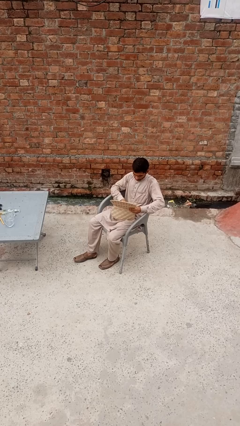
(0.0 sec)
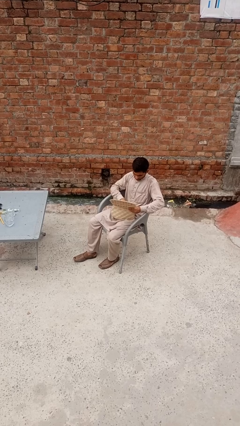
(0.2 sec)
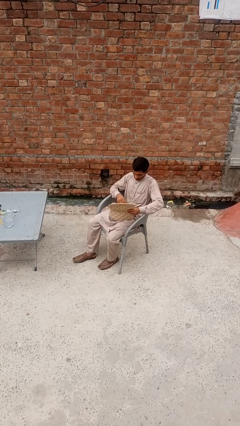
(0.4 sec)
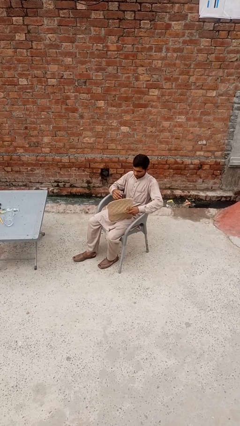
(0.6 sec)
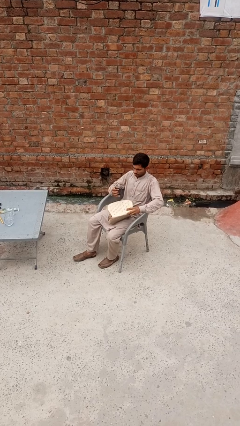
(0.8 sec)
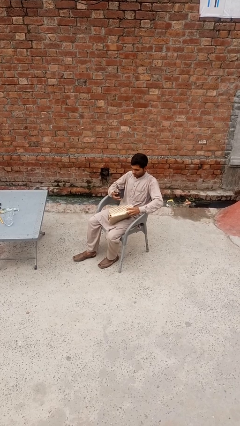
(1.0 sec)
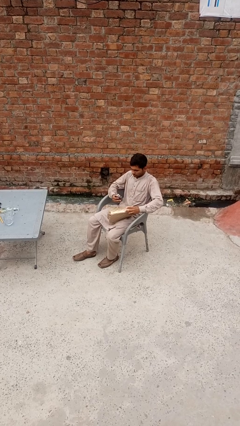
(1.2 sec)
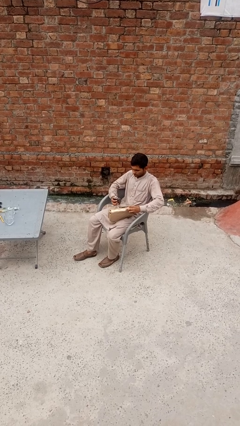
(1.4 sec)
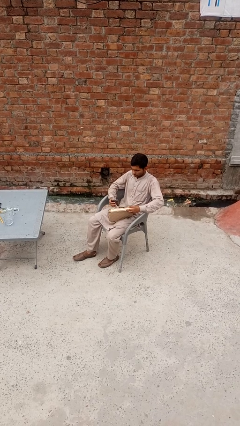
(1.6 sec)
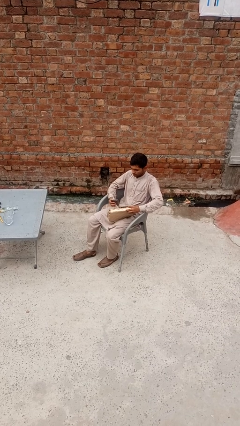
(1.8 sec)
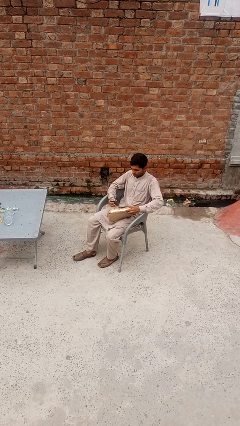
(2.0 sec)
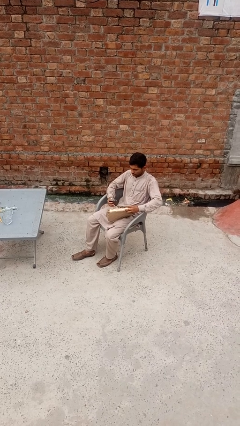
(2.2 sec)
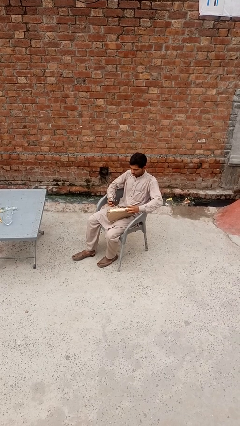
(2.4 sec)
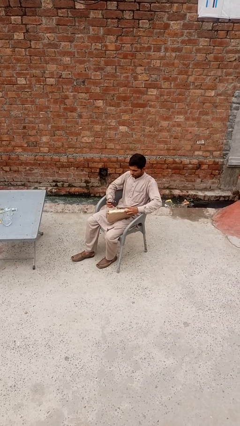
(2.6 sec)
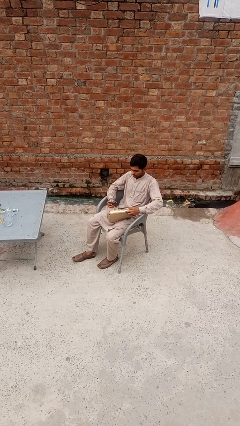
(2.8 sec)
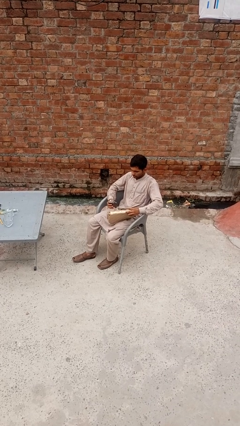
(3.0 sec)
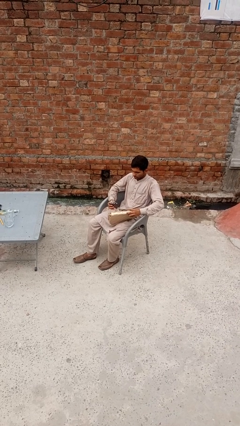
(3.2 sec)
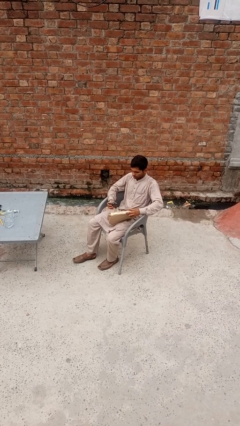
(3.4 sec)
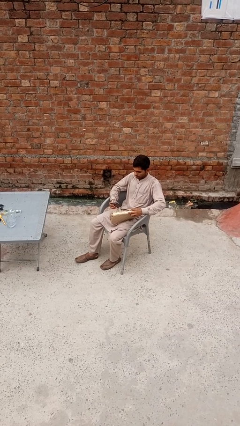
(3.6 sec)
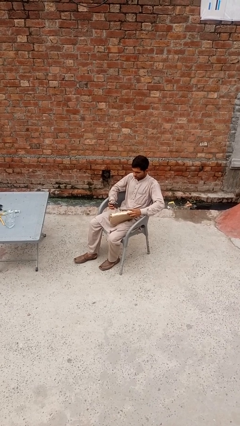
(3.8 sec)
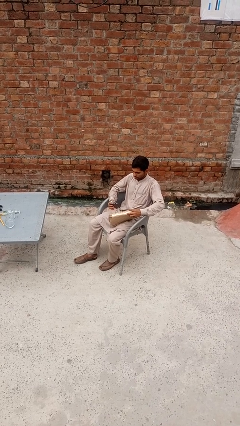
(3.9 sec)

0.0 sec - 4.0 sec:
person takes object from purse

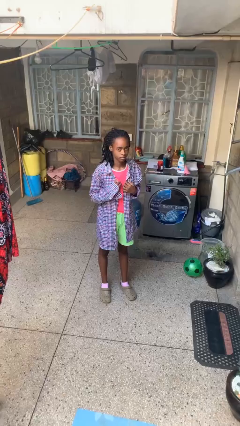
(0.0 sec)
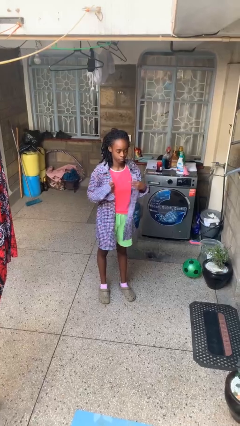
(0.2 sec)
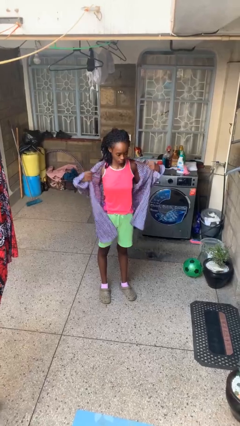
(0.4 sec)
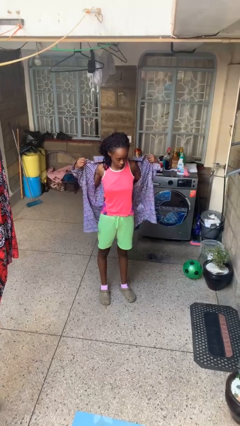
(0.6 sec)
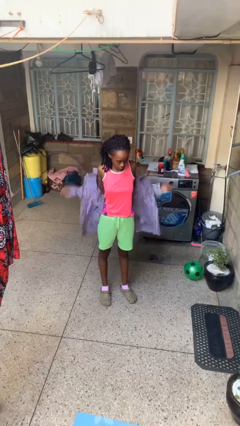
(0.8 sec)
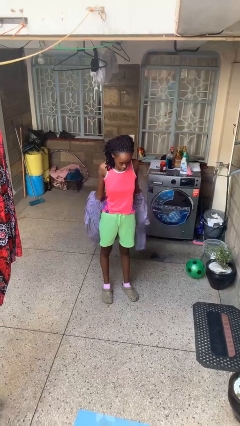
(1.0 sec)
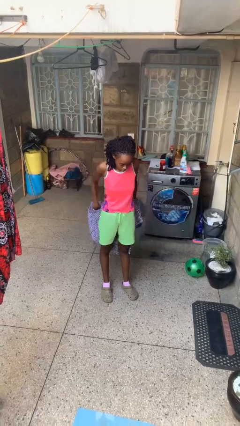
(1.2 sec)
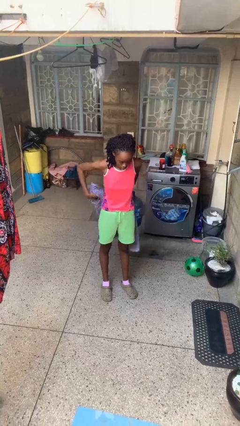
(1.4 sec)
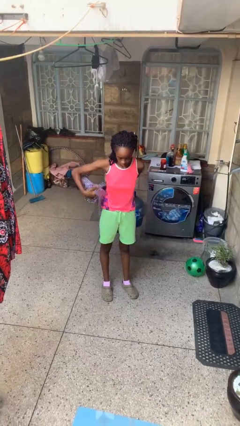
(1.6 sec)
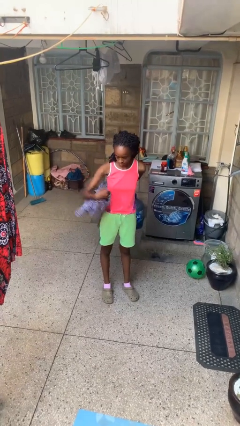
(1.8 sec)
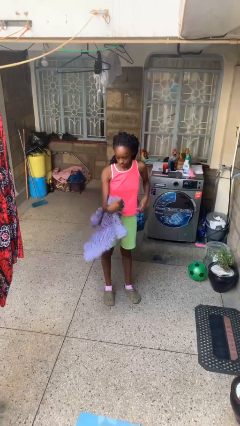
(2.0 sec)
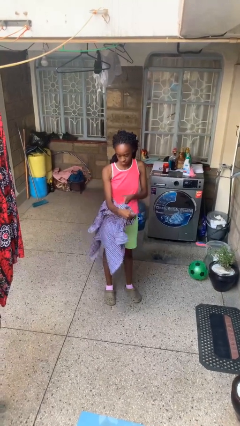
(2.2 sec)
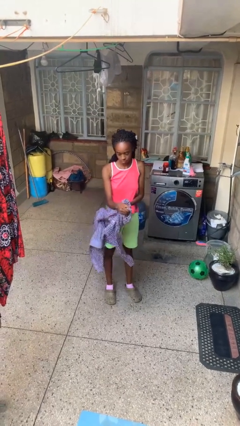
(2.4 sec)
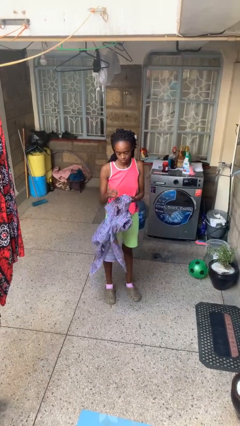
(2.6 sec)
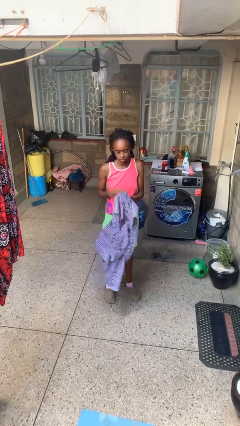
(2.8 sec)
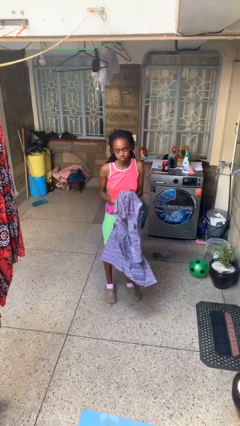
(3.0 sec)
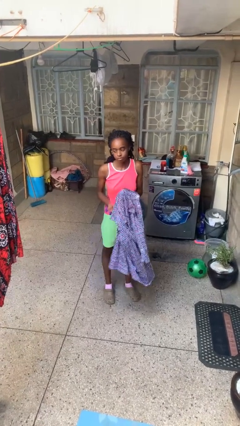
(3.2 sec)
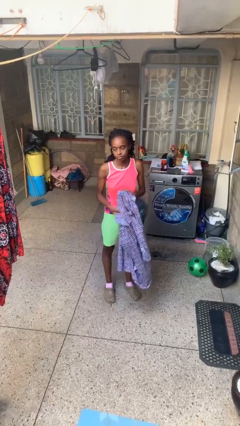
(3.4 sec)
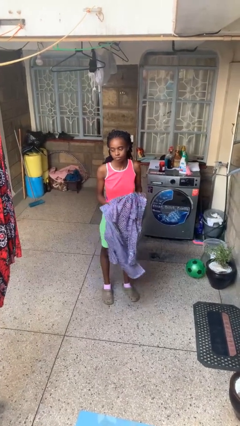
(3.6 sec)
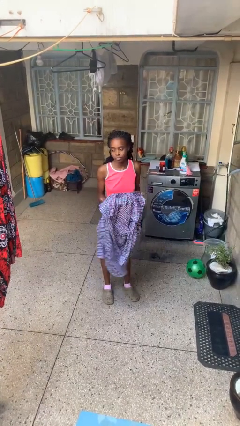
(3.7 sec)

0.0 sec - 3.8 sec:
person takes off shirt

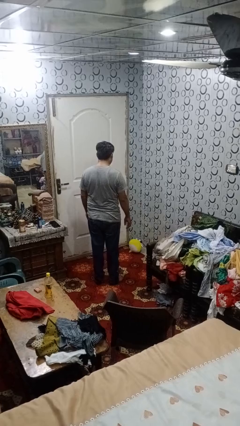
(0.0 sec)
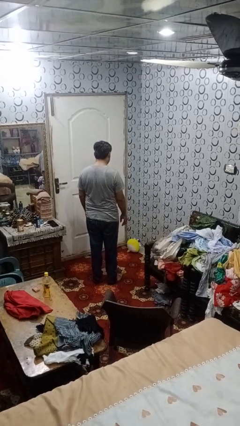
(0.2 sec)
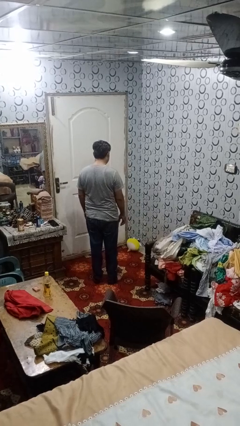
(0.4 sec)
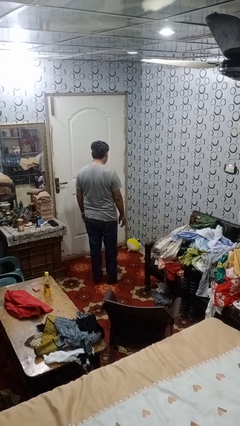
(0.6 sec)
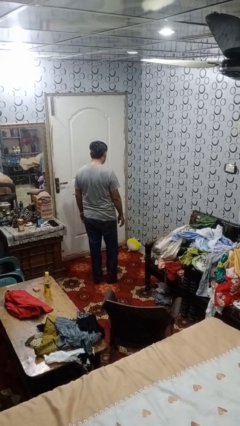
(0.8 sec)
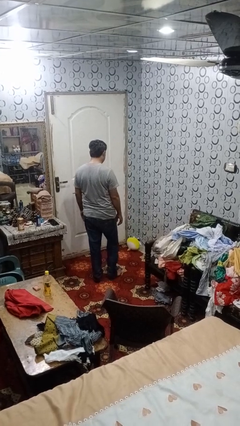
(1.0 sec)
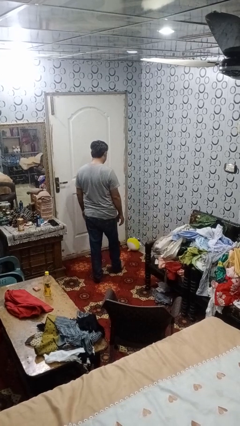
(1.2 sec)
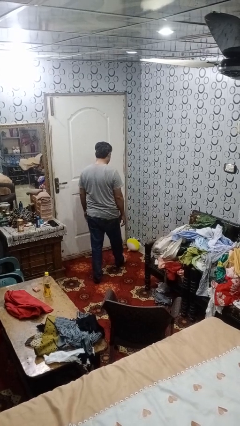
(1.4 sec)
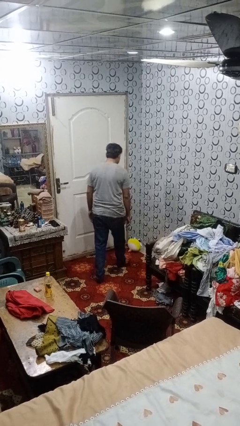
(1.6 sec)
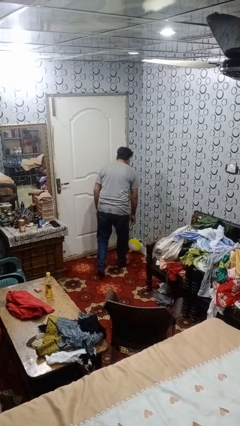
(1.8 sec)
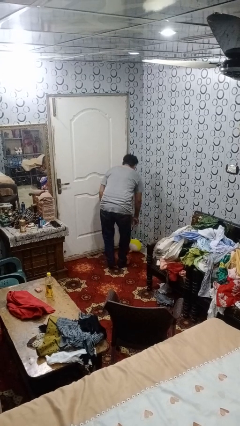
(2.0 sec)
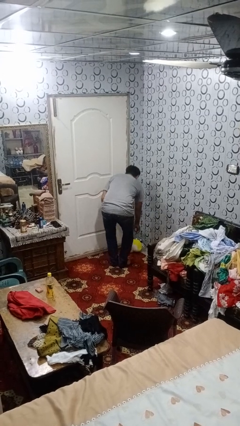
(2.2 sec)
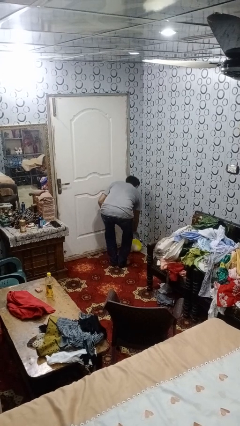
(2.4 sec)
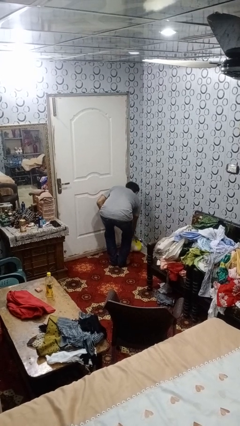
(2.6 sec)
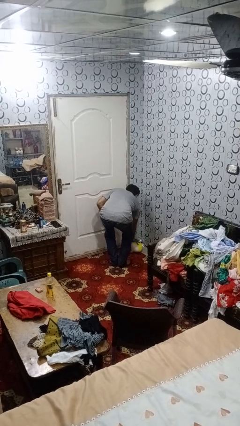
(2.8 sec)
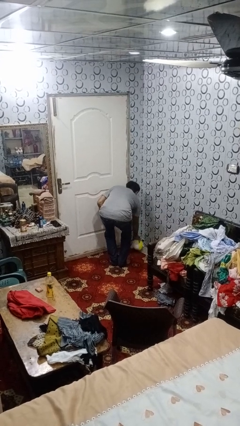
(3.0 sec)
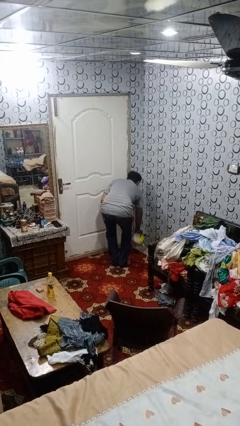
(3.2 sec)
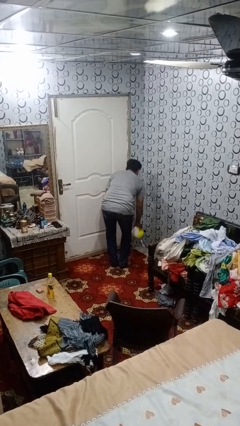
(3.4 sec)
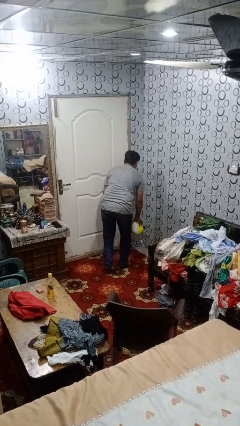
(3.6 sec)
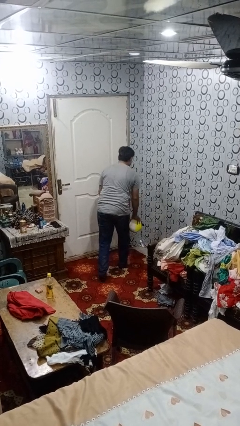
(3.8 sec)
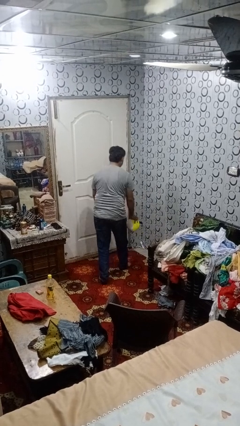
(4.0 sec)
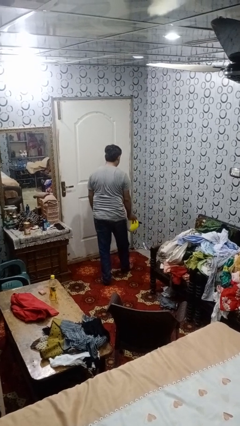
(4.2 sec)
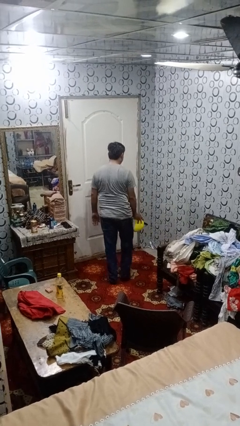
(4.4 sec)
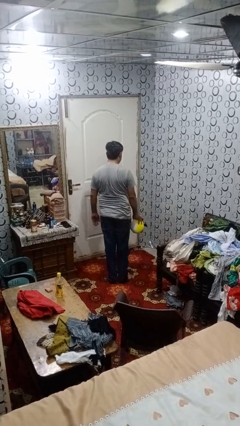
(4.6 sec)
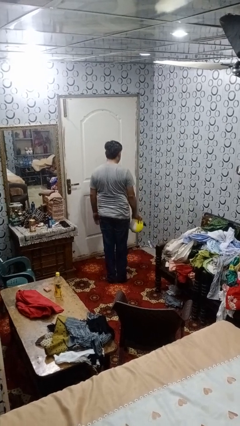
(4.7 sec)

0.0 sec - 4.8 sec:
person picks up object from floor

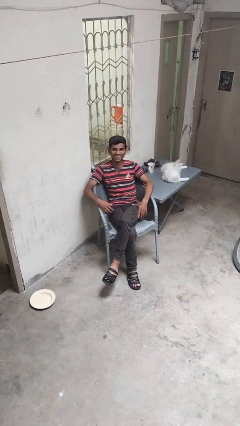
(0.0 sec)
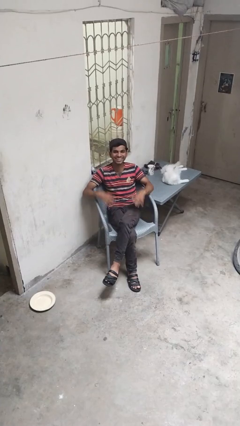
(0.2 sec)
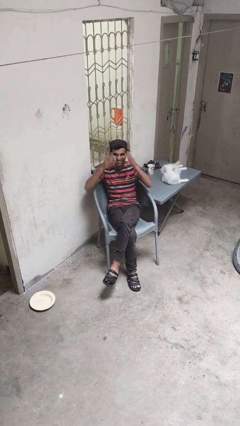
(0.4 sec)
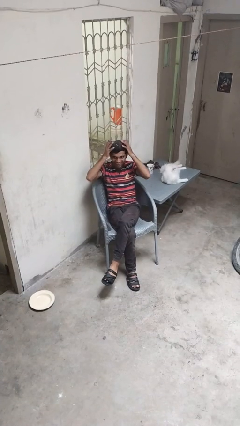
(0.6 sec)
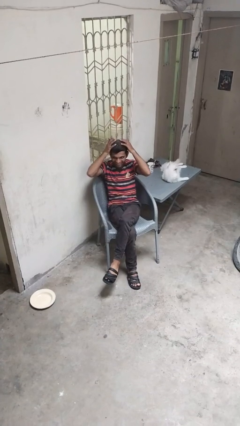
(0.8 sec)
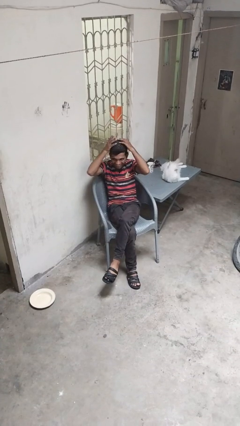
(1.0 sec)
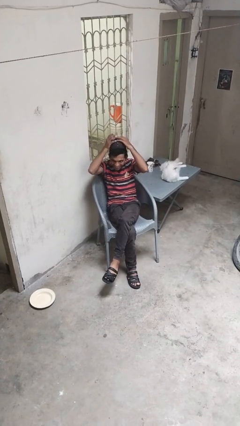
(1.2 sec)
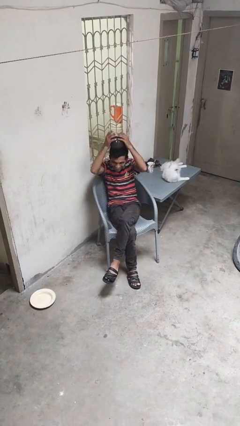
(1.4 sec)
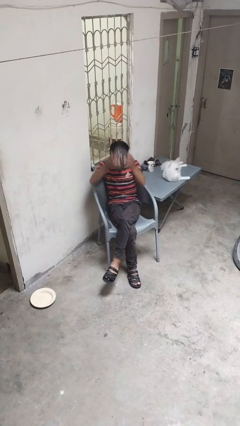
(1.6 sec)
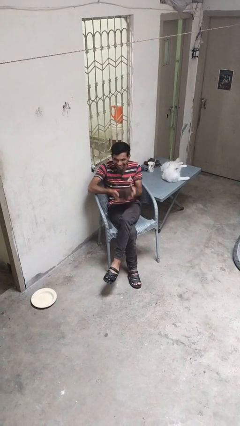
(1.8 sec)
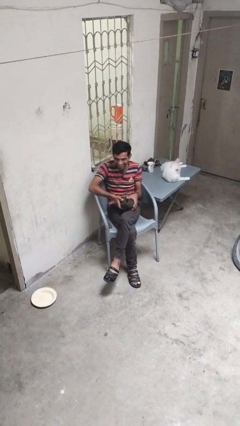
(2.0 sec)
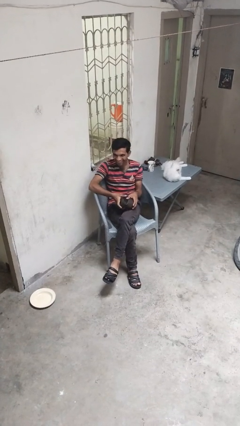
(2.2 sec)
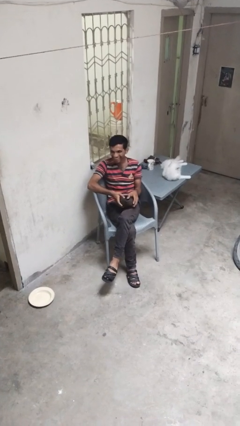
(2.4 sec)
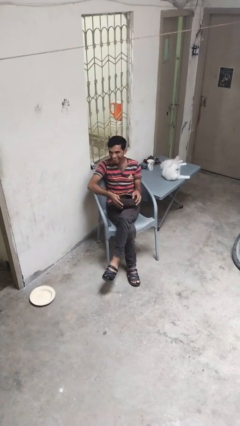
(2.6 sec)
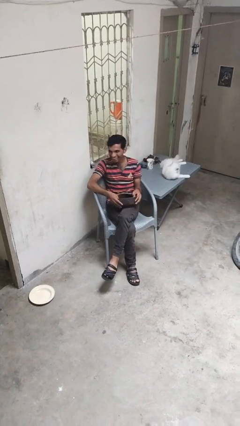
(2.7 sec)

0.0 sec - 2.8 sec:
person takes off hat

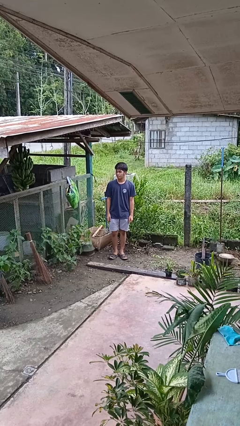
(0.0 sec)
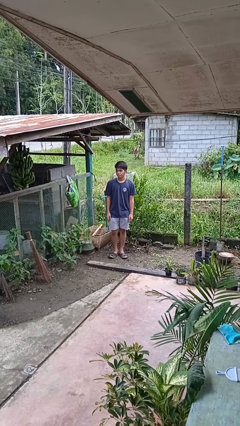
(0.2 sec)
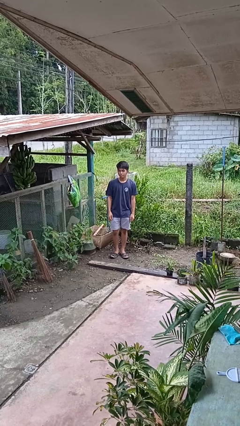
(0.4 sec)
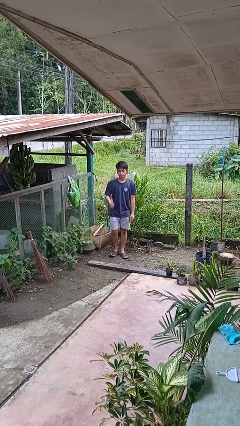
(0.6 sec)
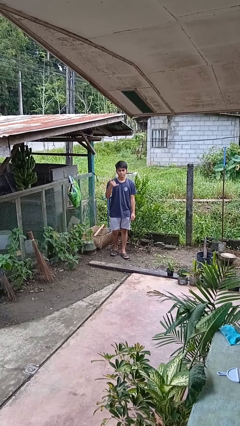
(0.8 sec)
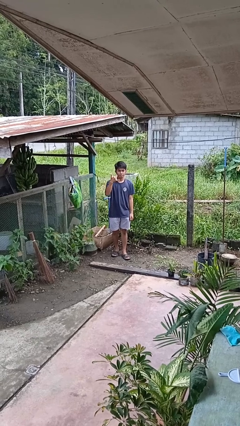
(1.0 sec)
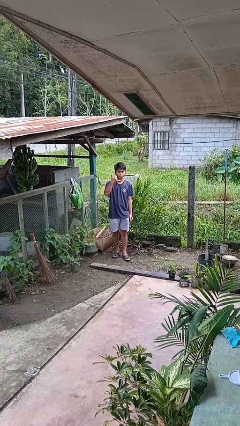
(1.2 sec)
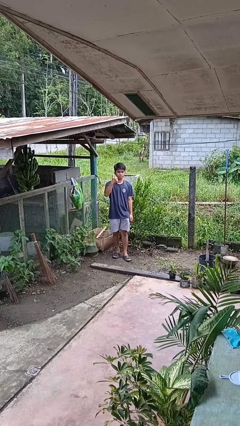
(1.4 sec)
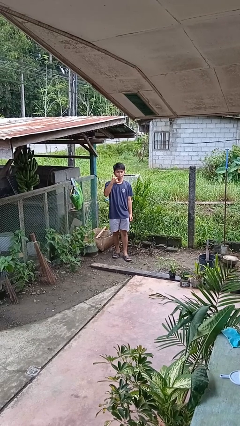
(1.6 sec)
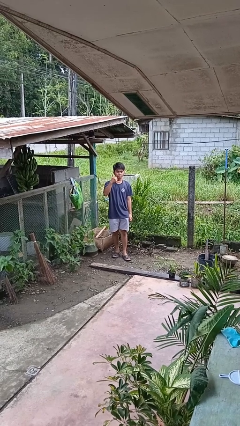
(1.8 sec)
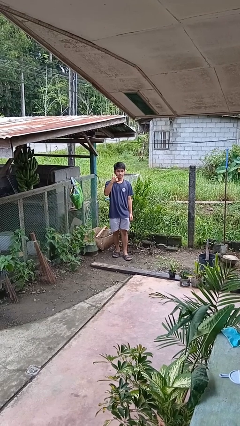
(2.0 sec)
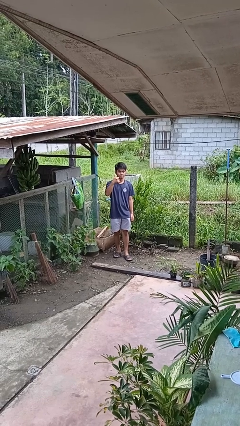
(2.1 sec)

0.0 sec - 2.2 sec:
person gestures hang loose
